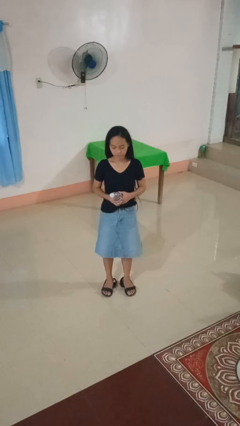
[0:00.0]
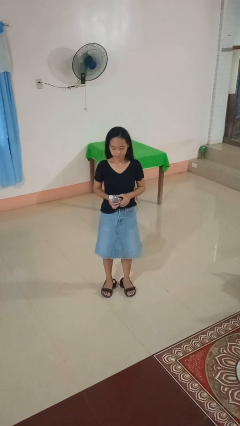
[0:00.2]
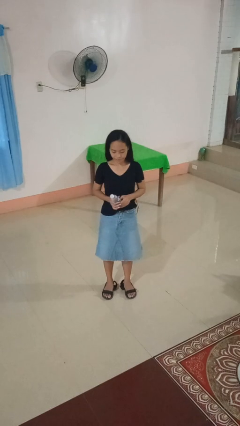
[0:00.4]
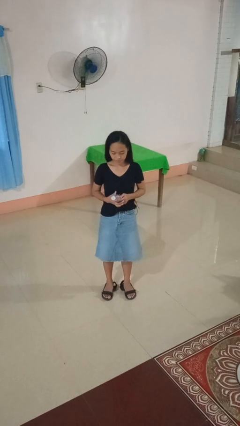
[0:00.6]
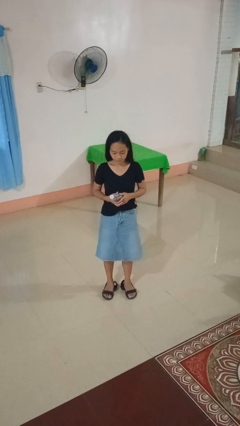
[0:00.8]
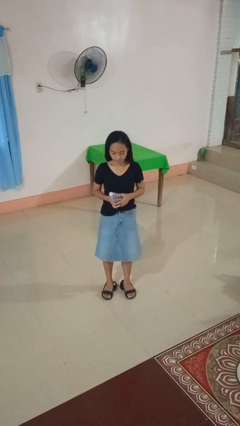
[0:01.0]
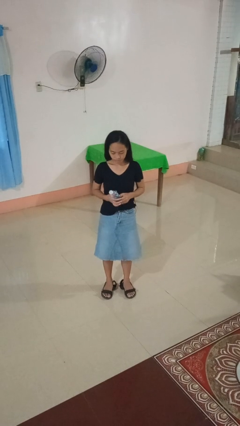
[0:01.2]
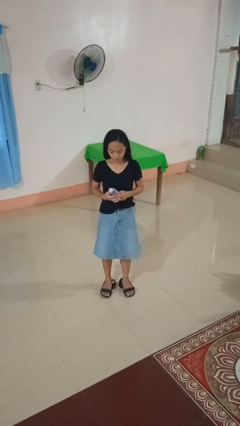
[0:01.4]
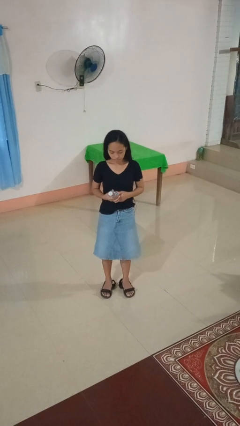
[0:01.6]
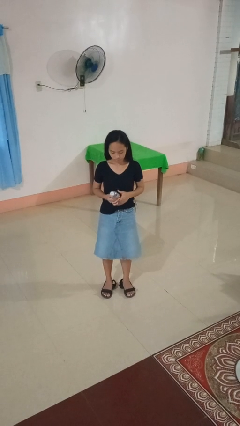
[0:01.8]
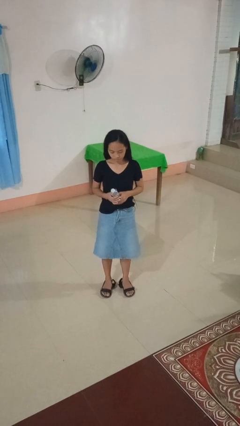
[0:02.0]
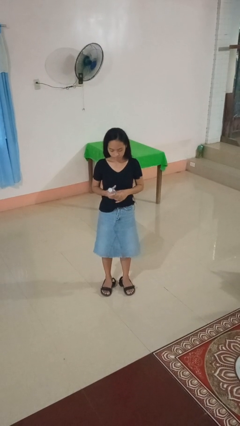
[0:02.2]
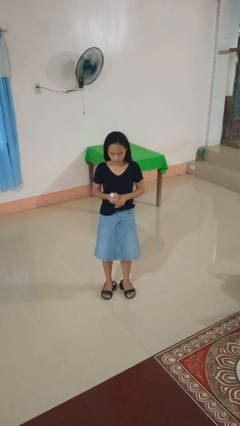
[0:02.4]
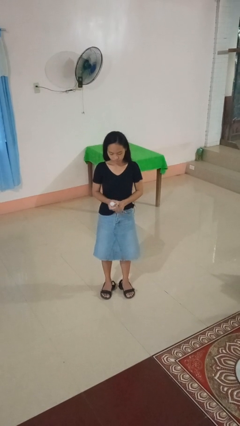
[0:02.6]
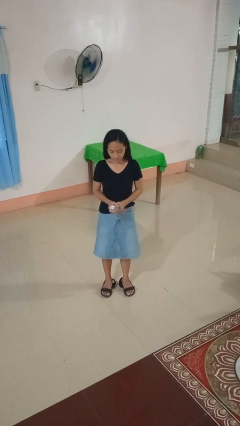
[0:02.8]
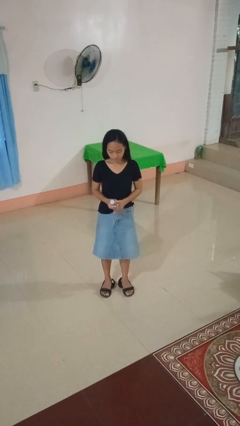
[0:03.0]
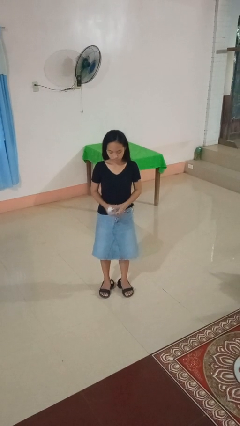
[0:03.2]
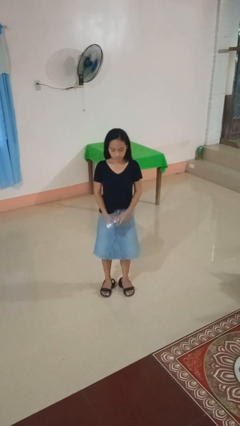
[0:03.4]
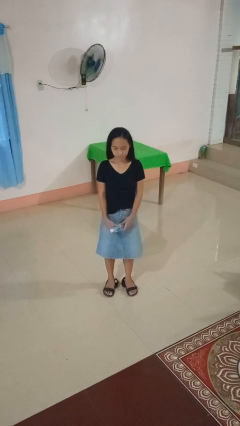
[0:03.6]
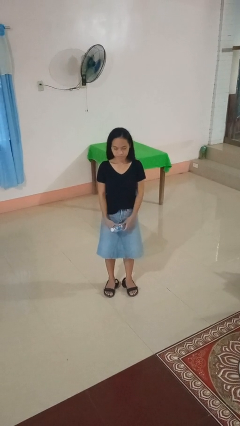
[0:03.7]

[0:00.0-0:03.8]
person squeezes object

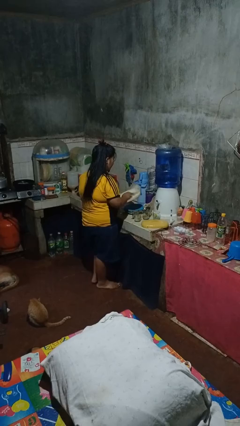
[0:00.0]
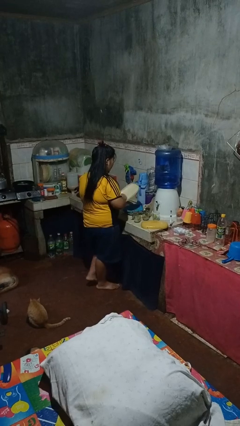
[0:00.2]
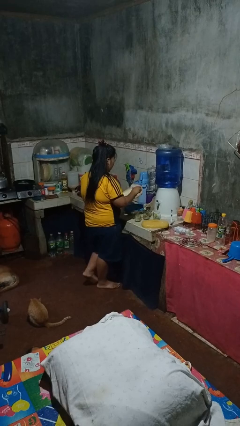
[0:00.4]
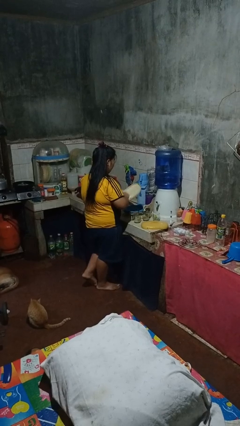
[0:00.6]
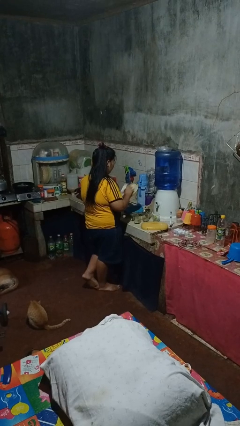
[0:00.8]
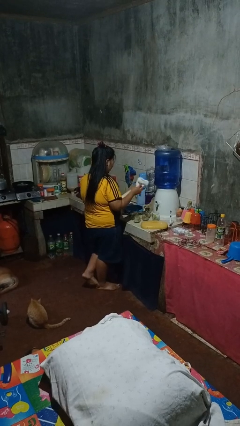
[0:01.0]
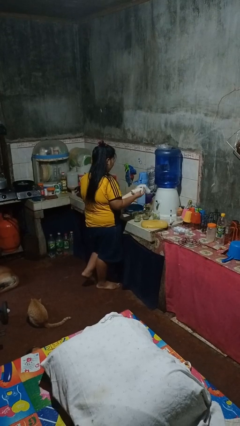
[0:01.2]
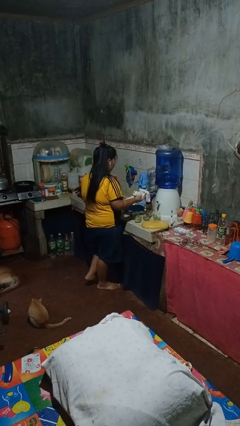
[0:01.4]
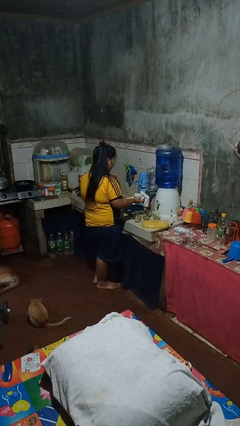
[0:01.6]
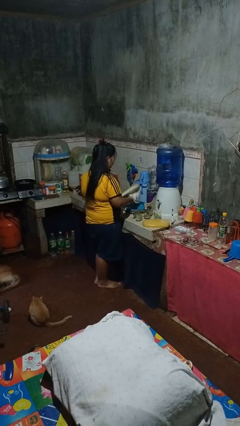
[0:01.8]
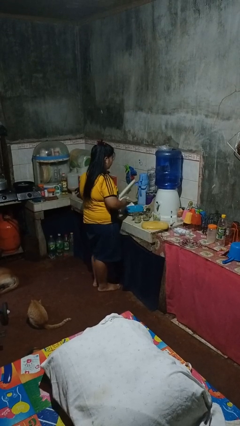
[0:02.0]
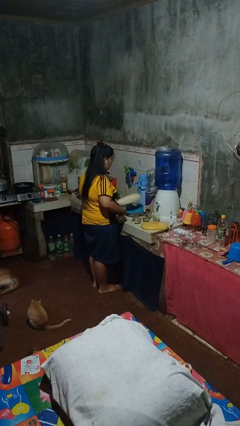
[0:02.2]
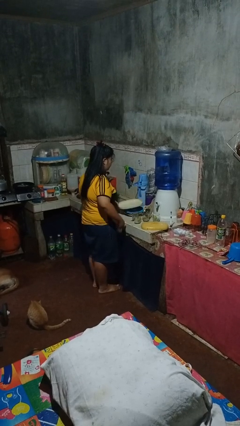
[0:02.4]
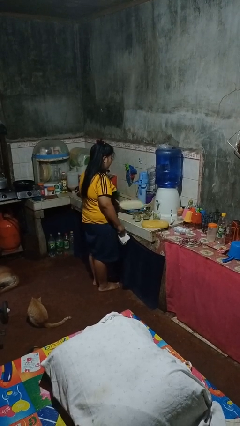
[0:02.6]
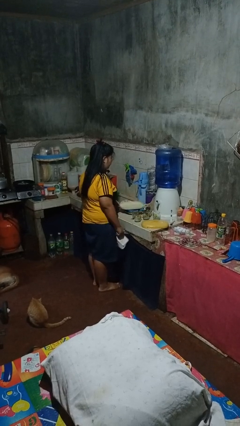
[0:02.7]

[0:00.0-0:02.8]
person dries dish

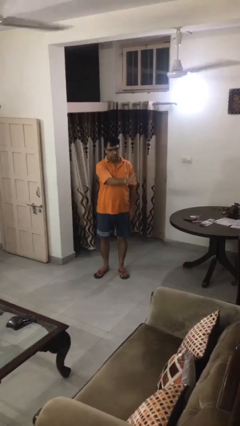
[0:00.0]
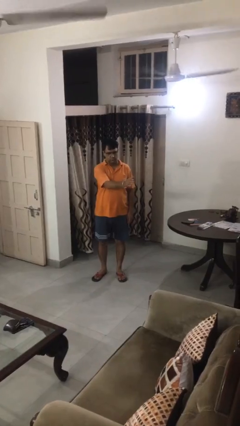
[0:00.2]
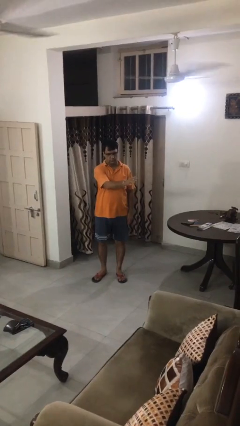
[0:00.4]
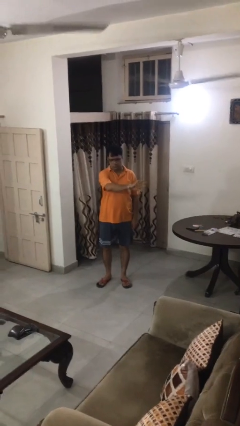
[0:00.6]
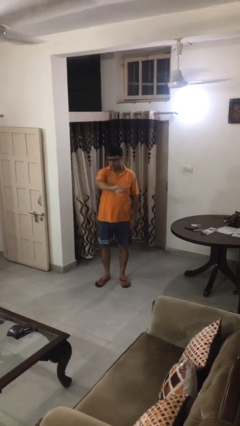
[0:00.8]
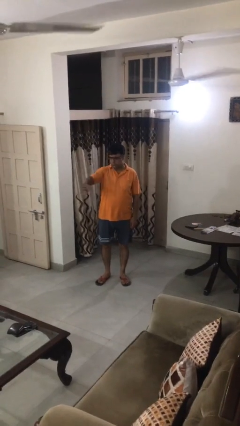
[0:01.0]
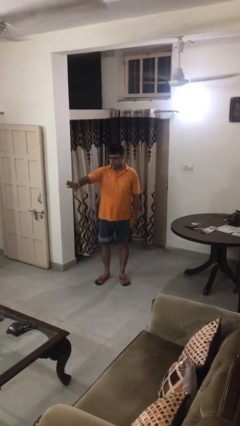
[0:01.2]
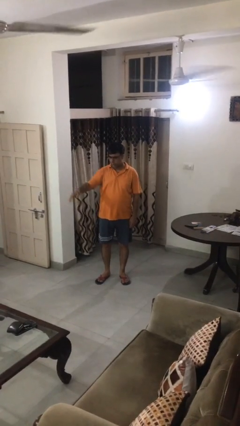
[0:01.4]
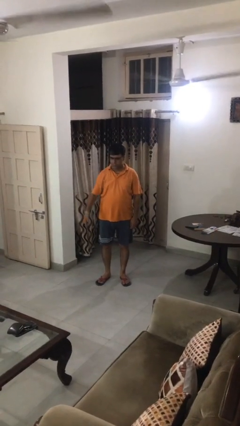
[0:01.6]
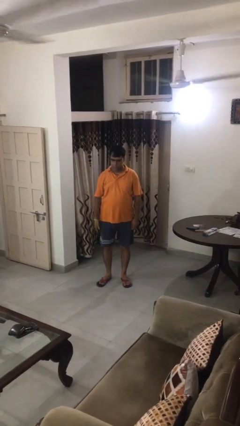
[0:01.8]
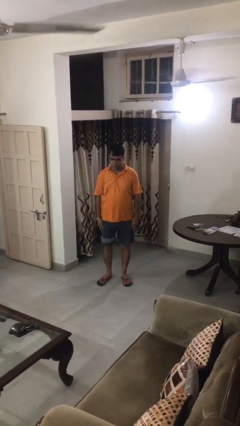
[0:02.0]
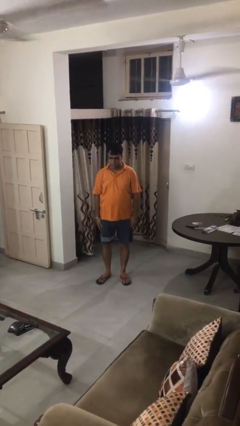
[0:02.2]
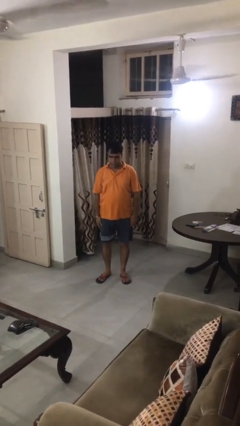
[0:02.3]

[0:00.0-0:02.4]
person gestures swipe right

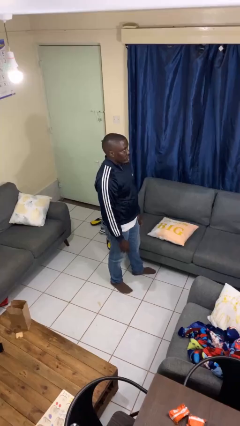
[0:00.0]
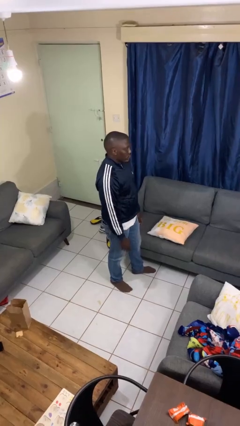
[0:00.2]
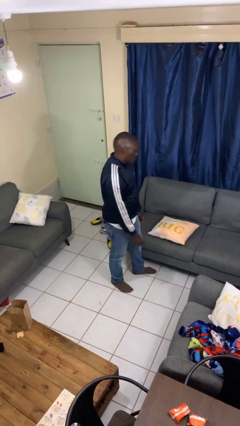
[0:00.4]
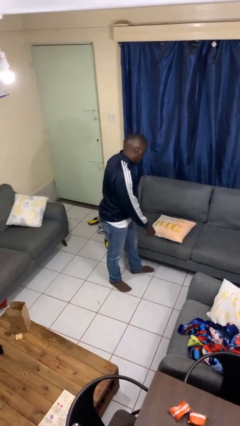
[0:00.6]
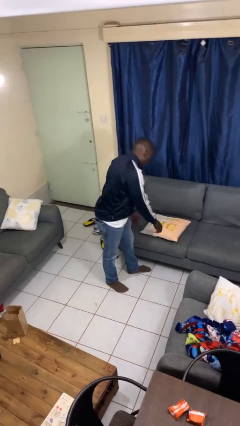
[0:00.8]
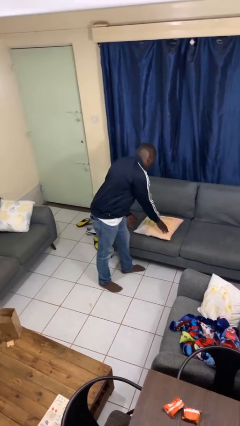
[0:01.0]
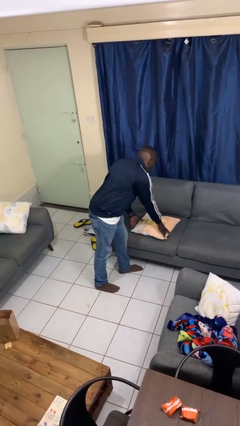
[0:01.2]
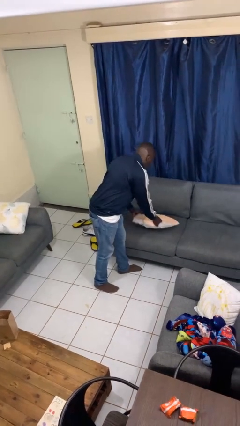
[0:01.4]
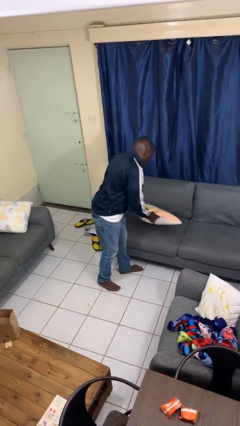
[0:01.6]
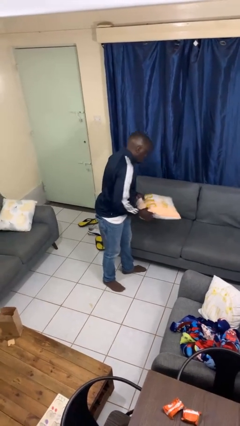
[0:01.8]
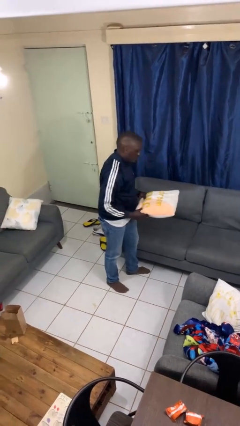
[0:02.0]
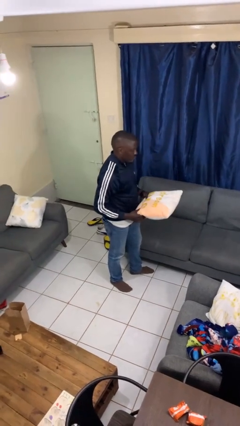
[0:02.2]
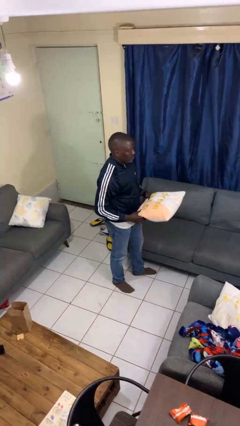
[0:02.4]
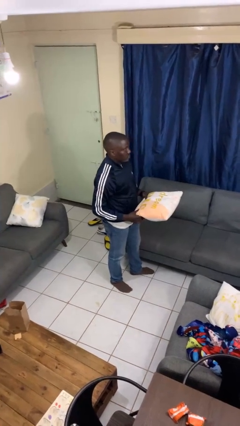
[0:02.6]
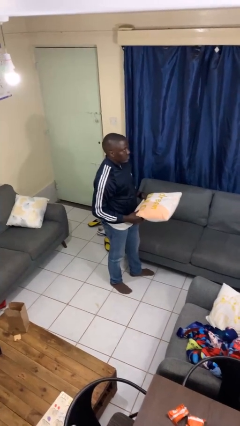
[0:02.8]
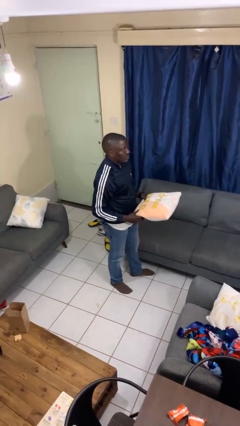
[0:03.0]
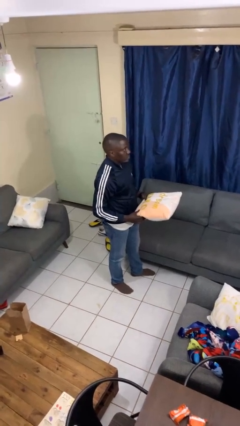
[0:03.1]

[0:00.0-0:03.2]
person picks up object from couch

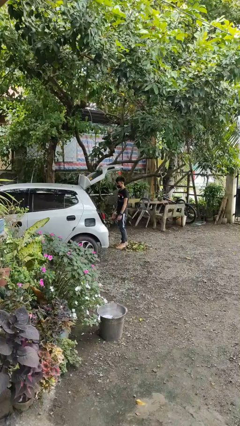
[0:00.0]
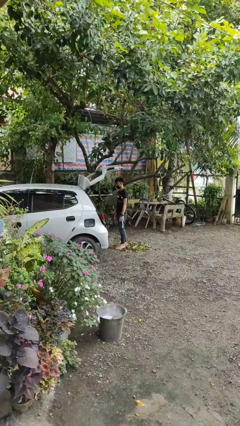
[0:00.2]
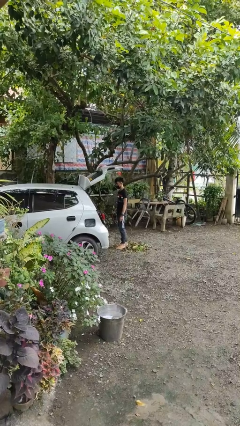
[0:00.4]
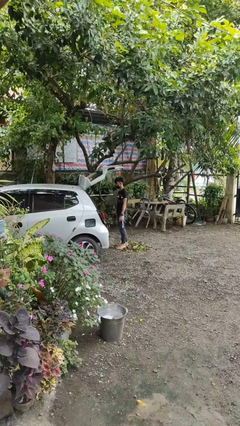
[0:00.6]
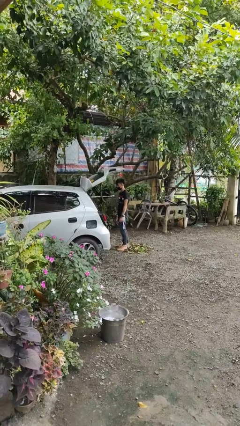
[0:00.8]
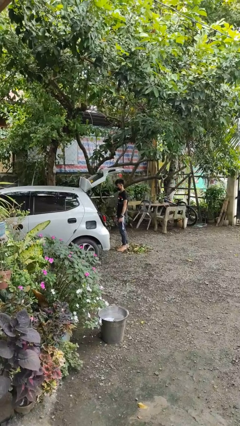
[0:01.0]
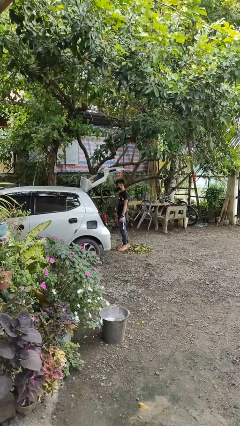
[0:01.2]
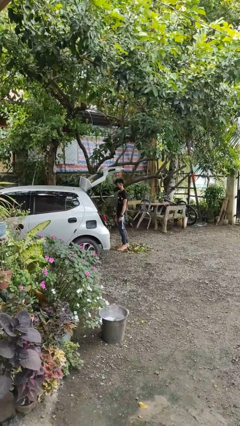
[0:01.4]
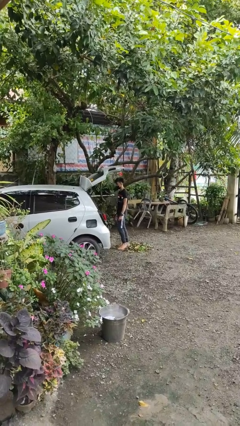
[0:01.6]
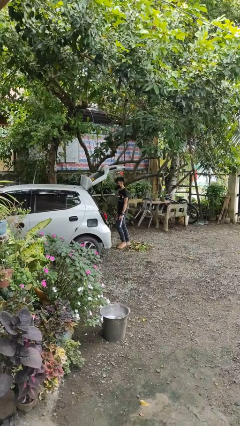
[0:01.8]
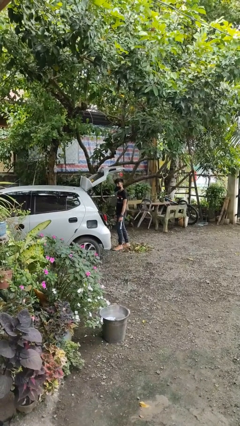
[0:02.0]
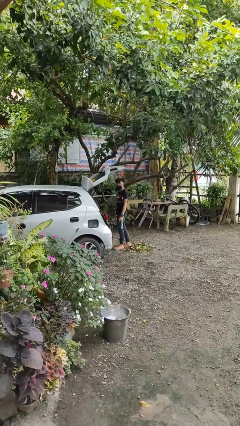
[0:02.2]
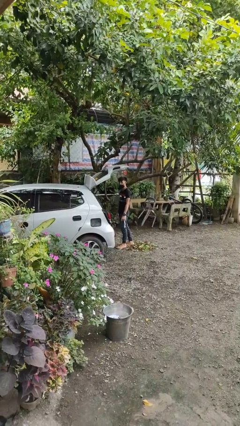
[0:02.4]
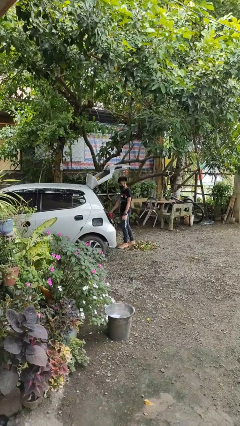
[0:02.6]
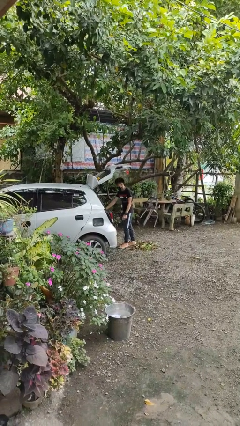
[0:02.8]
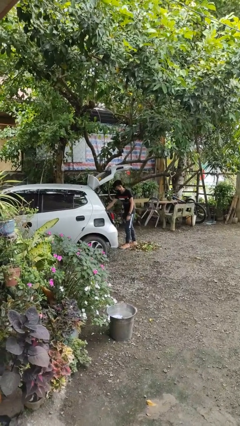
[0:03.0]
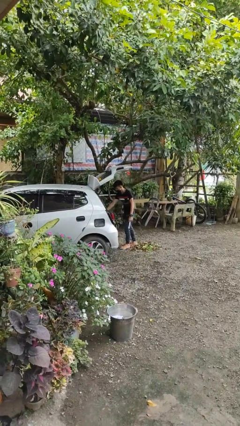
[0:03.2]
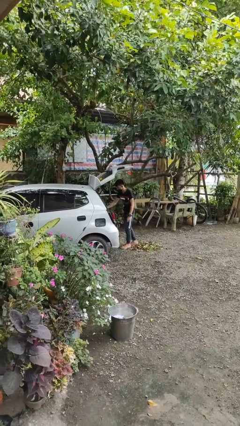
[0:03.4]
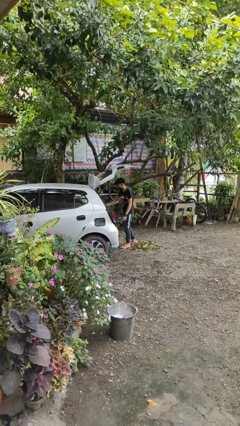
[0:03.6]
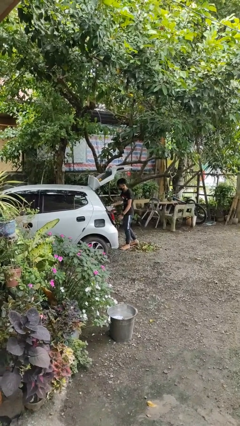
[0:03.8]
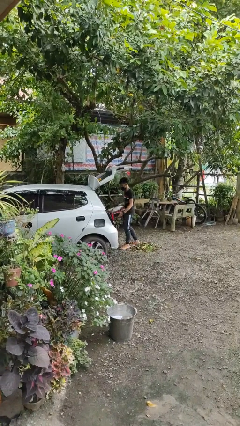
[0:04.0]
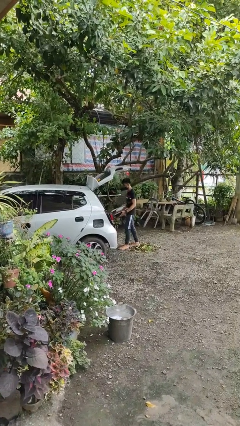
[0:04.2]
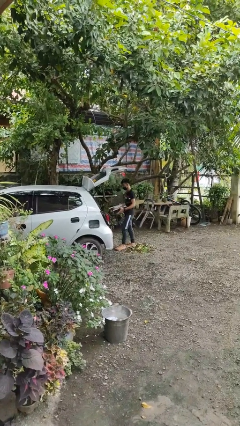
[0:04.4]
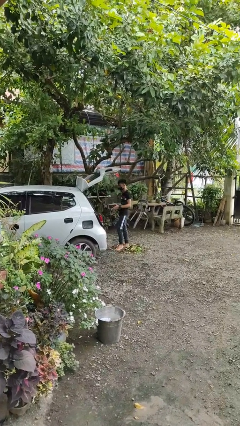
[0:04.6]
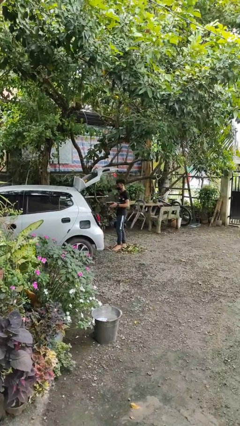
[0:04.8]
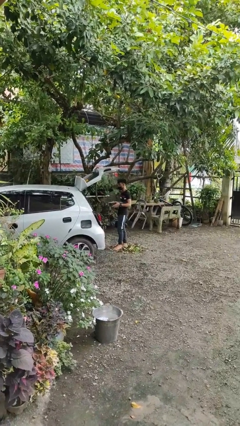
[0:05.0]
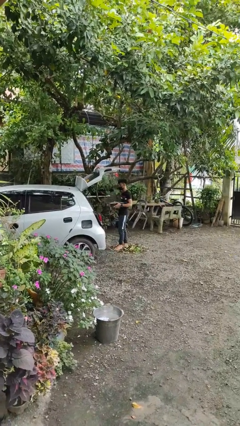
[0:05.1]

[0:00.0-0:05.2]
person unloads car

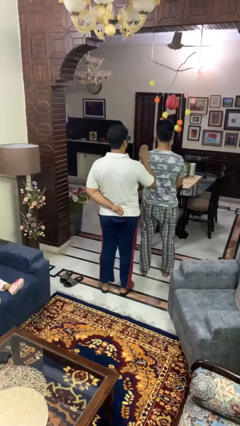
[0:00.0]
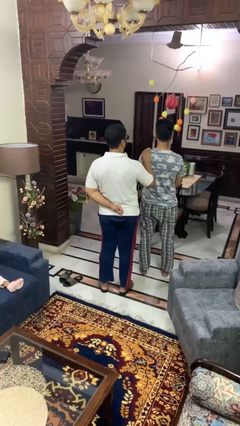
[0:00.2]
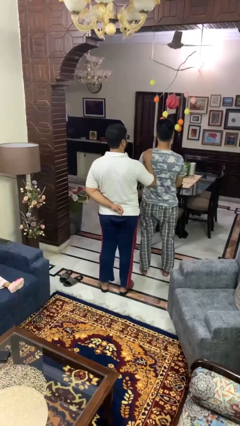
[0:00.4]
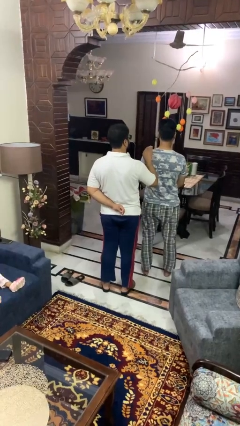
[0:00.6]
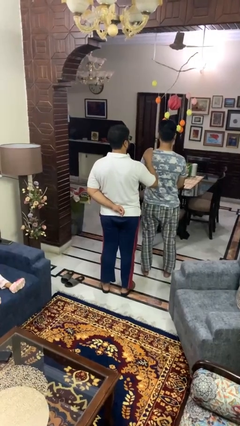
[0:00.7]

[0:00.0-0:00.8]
person pounds shoulders of person
